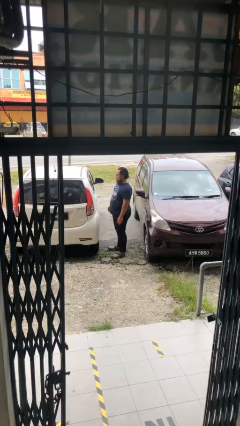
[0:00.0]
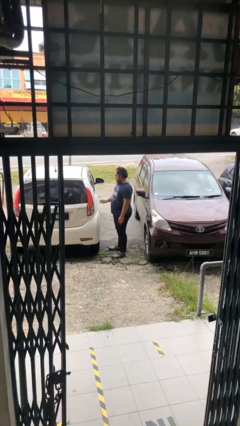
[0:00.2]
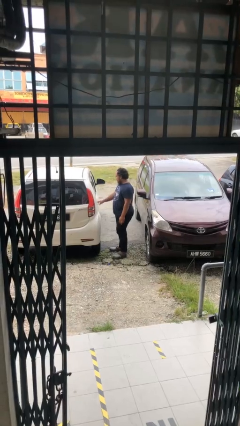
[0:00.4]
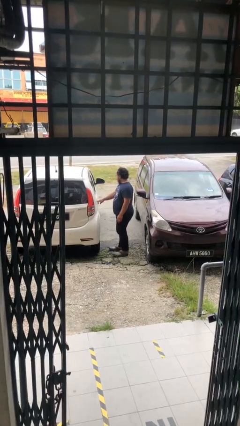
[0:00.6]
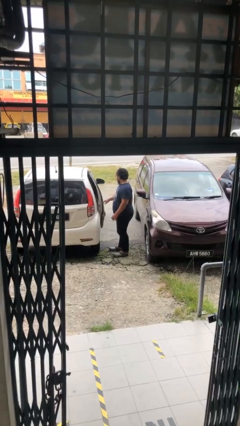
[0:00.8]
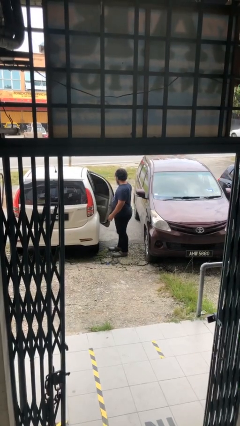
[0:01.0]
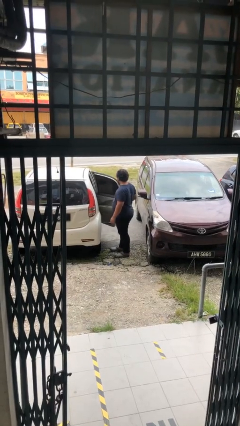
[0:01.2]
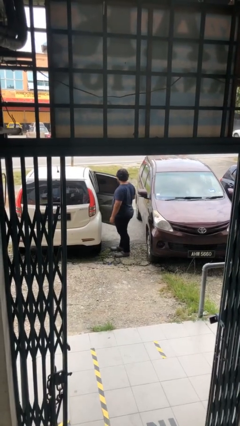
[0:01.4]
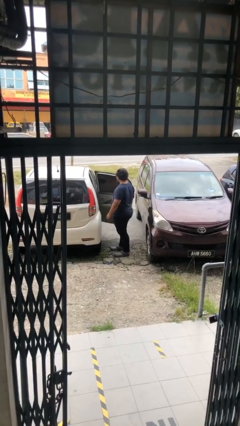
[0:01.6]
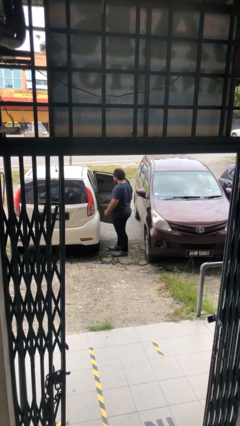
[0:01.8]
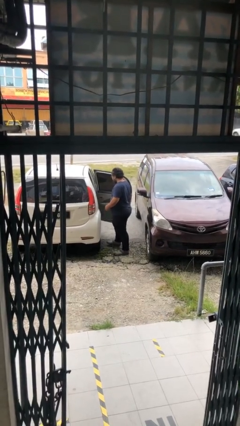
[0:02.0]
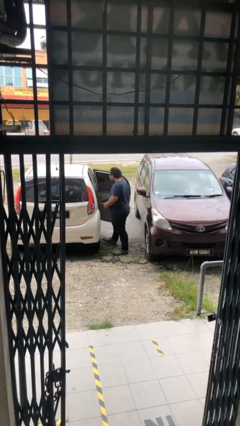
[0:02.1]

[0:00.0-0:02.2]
person opens car door

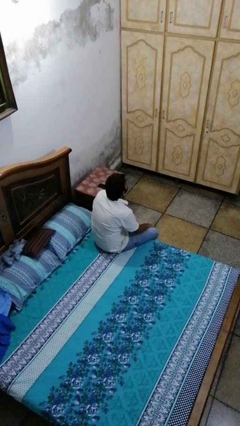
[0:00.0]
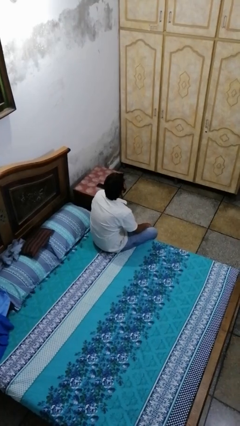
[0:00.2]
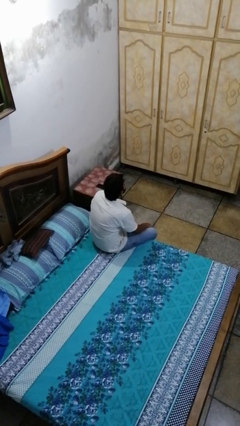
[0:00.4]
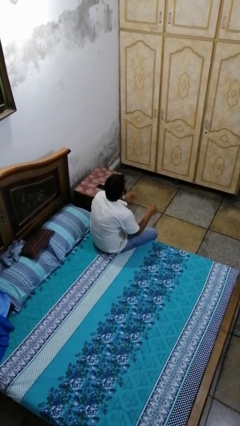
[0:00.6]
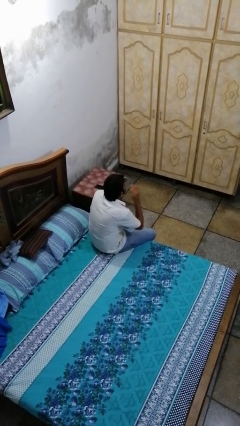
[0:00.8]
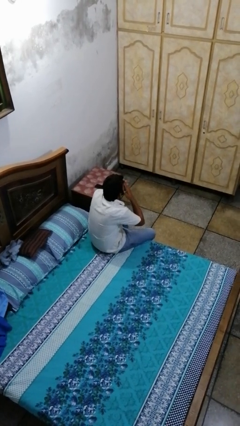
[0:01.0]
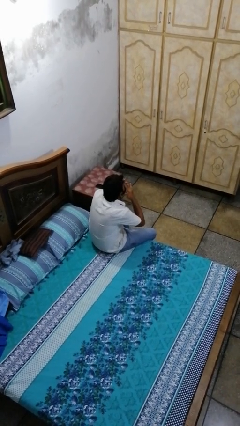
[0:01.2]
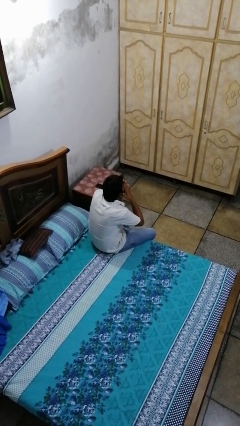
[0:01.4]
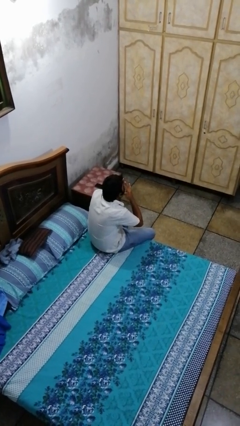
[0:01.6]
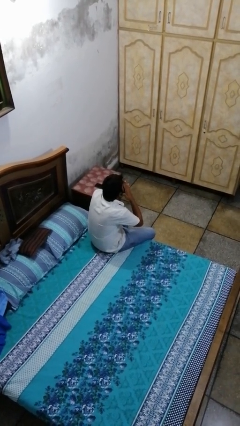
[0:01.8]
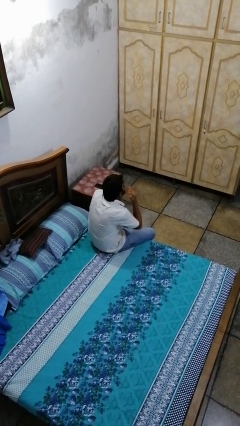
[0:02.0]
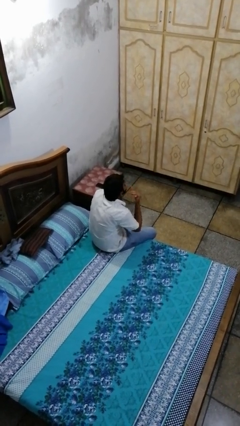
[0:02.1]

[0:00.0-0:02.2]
person rubs eyes

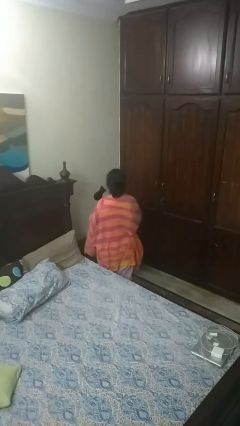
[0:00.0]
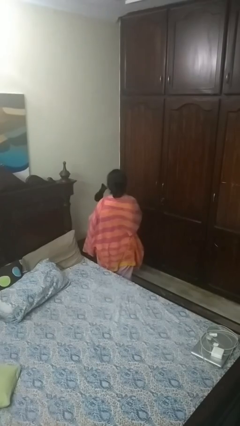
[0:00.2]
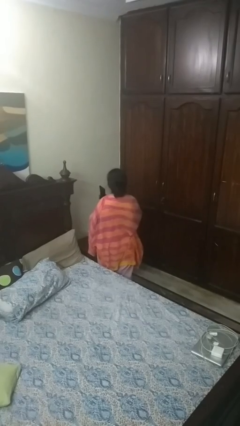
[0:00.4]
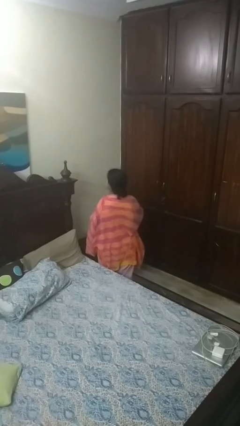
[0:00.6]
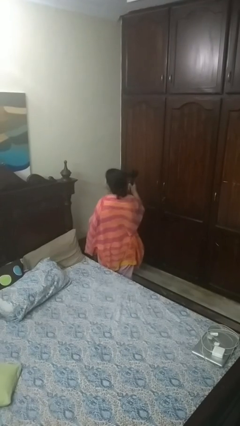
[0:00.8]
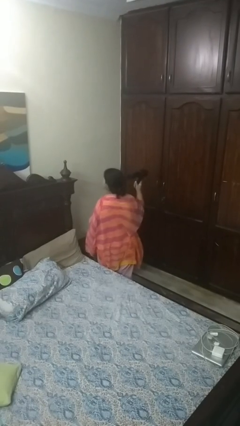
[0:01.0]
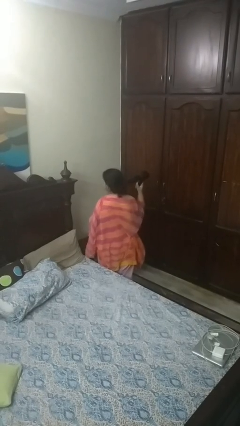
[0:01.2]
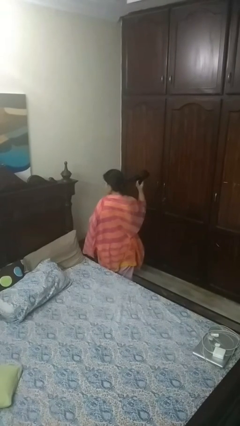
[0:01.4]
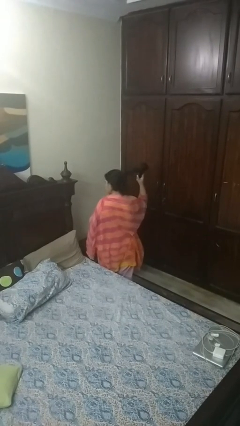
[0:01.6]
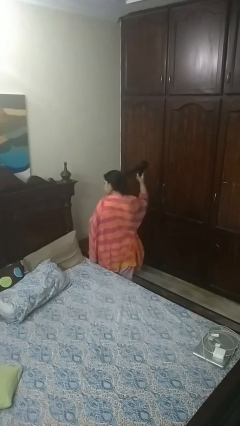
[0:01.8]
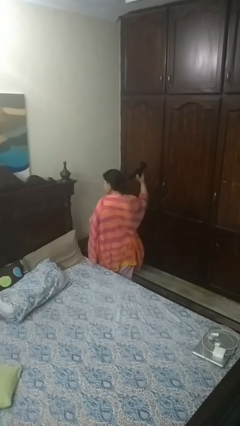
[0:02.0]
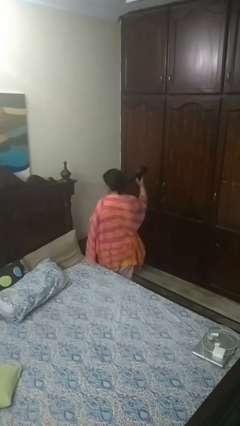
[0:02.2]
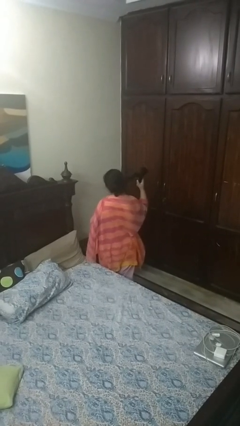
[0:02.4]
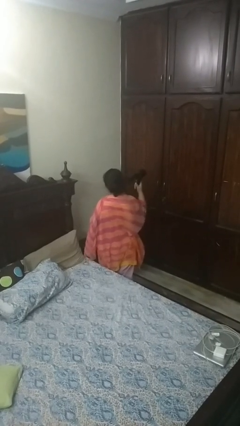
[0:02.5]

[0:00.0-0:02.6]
person dries hair with hairdryer

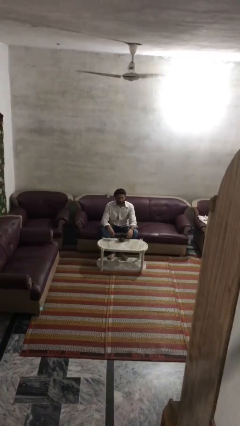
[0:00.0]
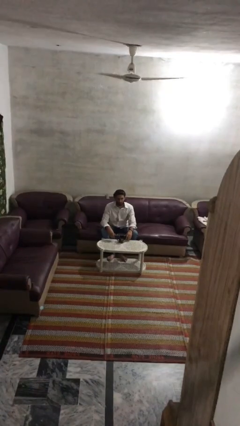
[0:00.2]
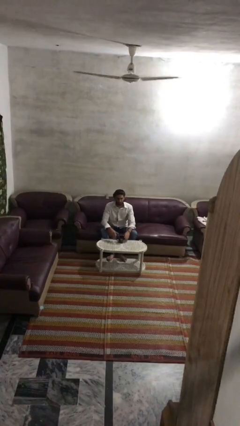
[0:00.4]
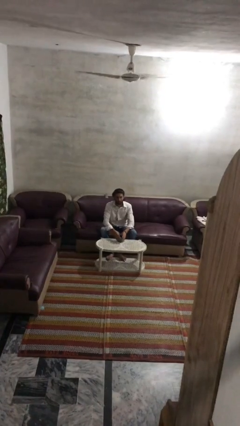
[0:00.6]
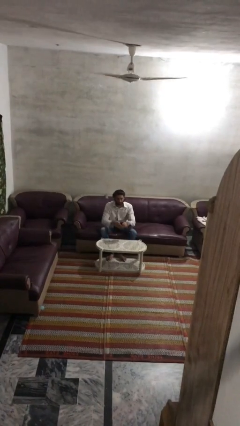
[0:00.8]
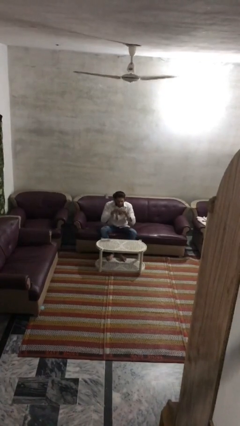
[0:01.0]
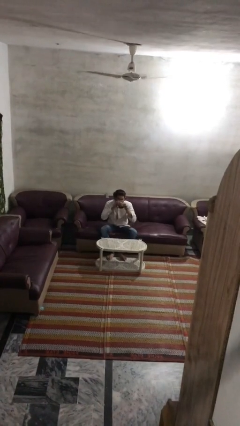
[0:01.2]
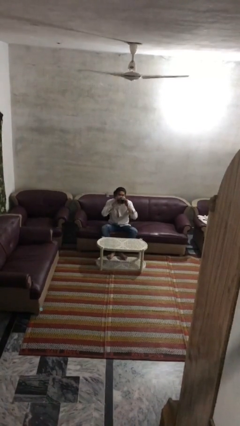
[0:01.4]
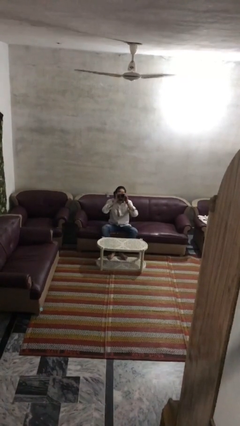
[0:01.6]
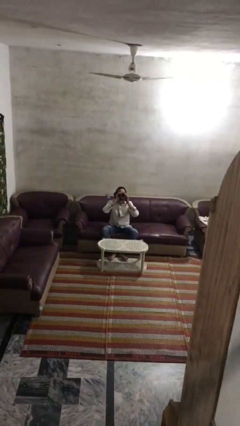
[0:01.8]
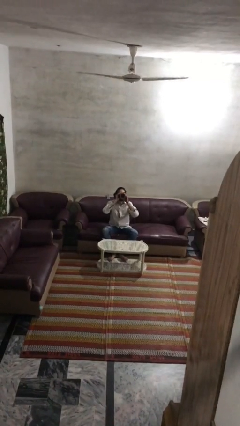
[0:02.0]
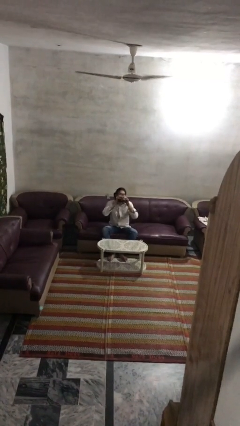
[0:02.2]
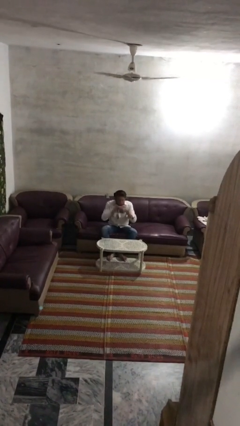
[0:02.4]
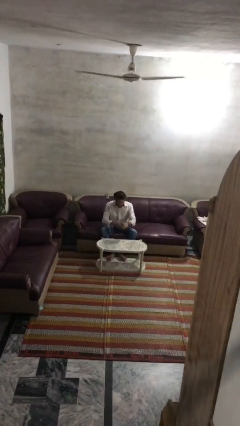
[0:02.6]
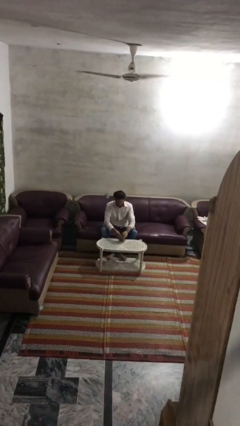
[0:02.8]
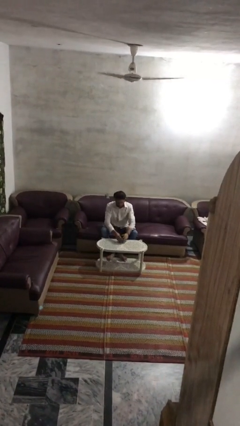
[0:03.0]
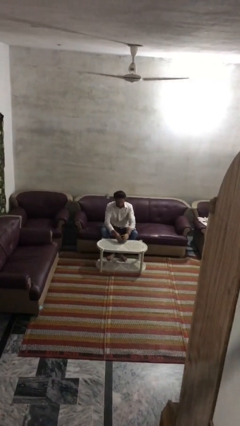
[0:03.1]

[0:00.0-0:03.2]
person drinks from mug

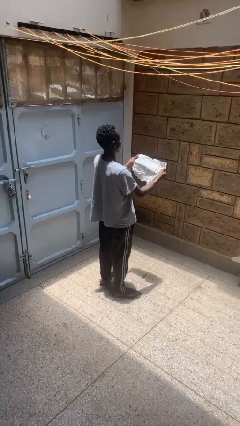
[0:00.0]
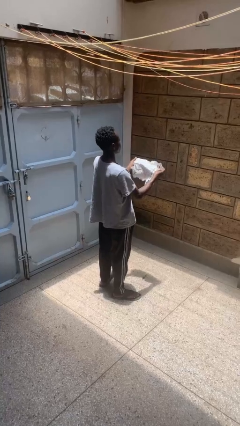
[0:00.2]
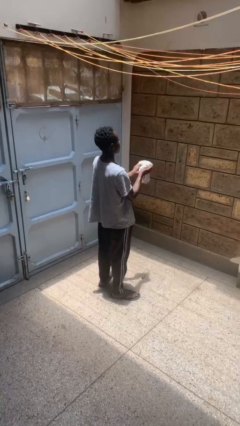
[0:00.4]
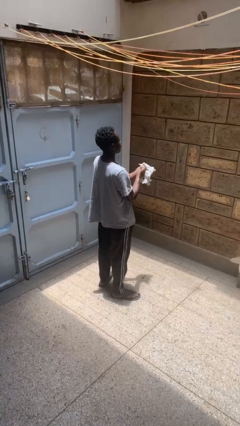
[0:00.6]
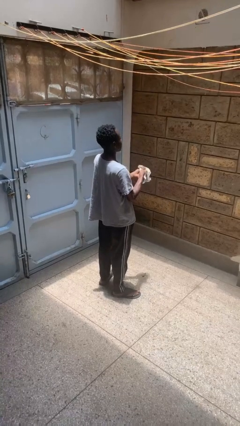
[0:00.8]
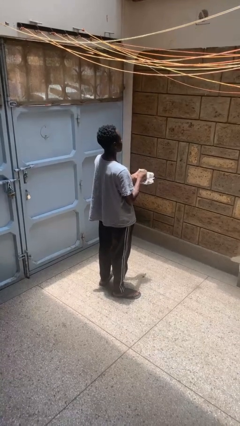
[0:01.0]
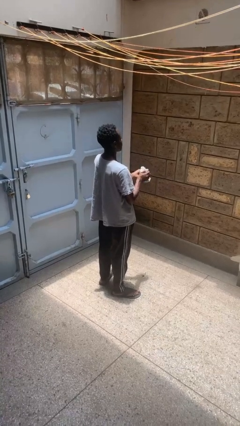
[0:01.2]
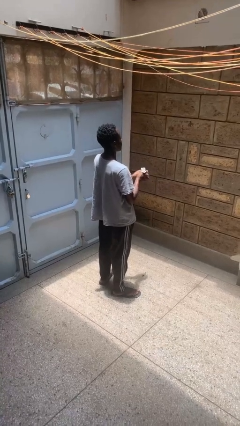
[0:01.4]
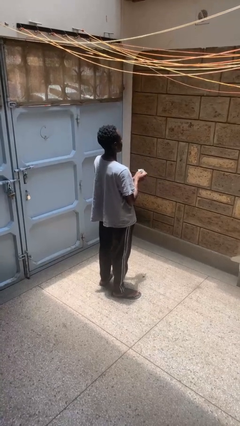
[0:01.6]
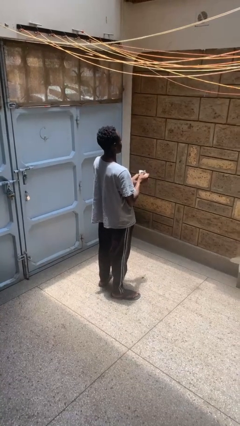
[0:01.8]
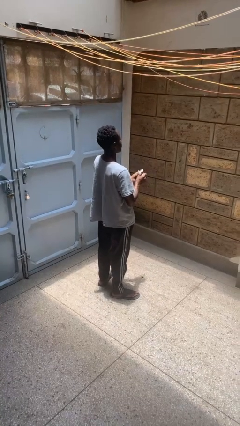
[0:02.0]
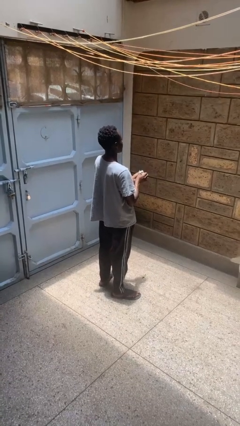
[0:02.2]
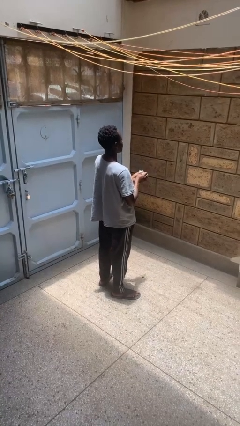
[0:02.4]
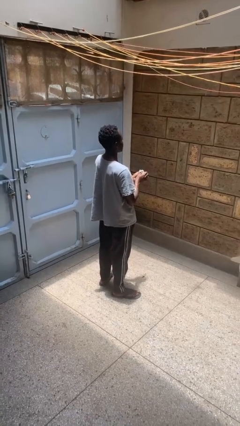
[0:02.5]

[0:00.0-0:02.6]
person crumples paper

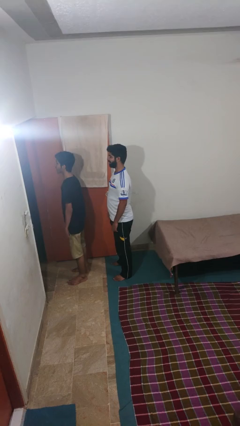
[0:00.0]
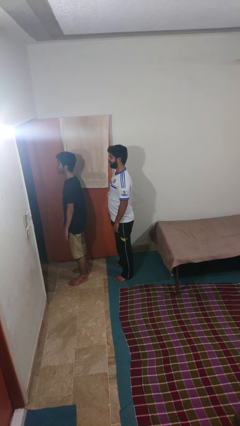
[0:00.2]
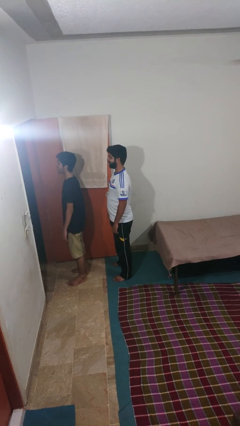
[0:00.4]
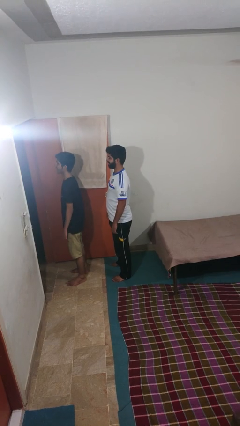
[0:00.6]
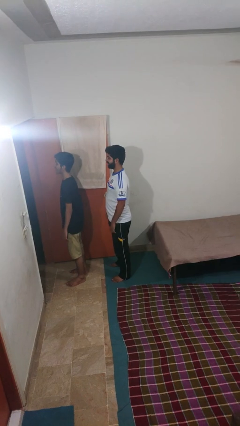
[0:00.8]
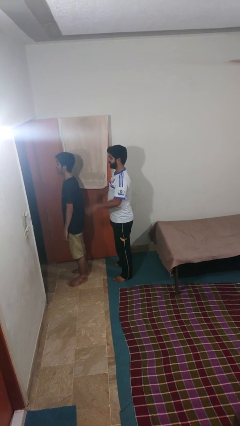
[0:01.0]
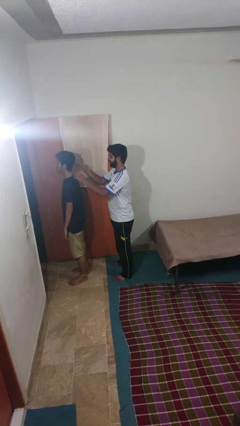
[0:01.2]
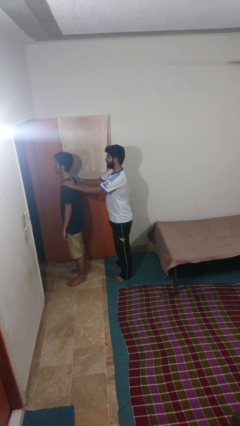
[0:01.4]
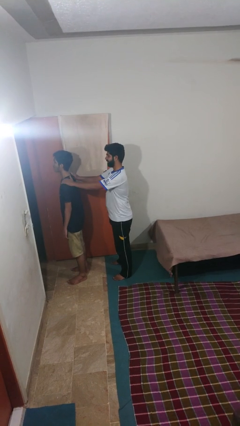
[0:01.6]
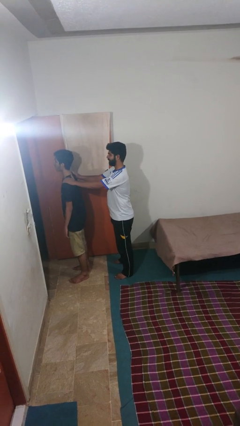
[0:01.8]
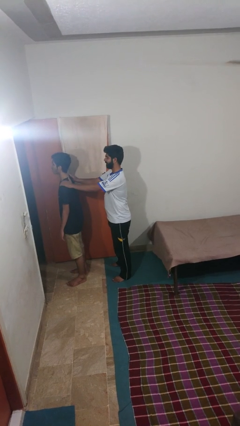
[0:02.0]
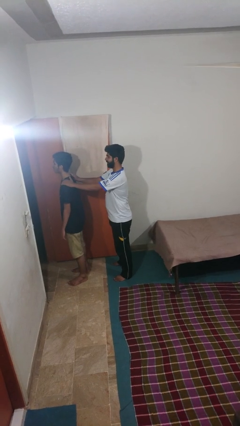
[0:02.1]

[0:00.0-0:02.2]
person grabs person by shoulder

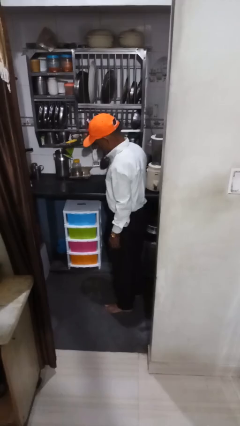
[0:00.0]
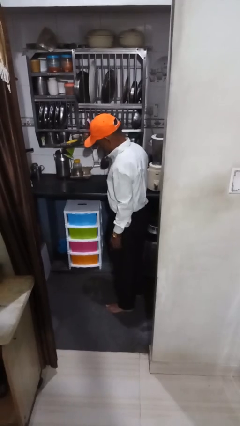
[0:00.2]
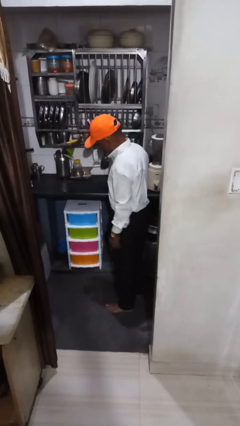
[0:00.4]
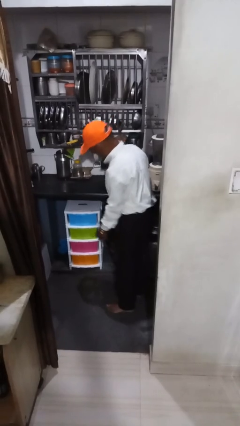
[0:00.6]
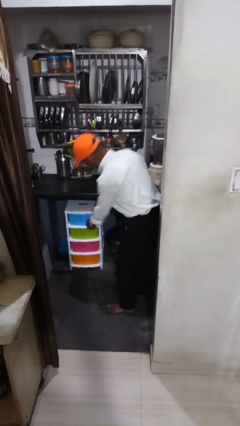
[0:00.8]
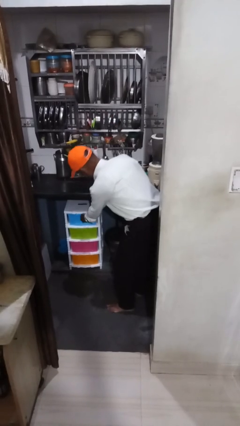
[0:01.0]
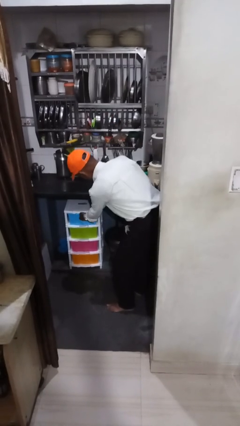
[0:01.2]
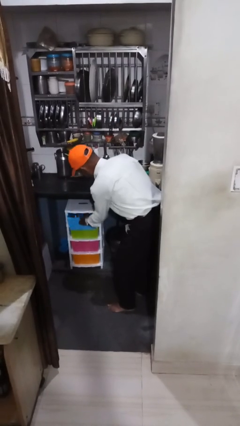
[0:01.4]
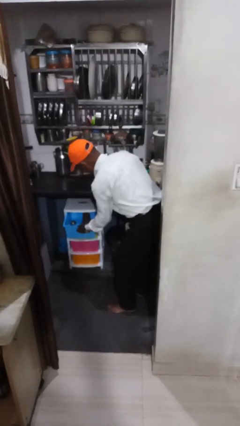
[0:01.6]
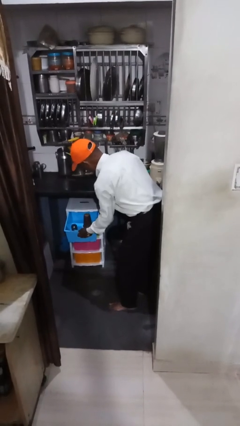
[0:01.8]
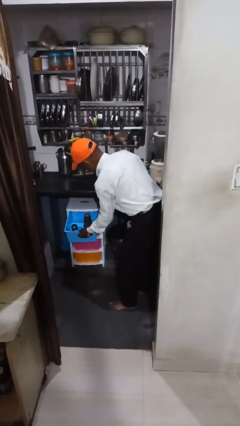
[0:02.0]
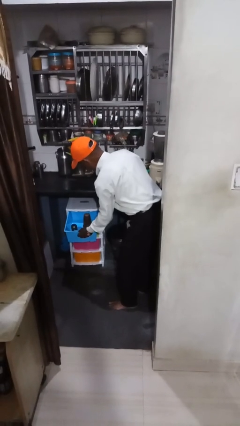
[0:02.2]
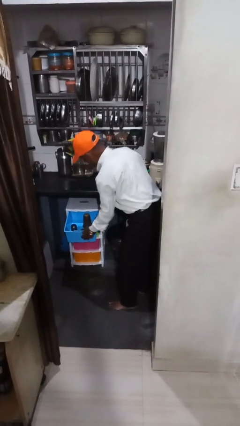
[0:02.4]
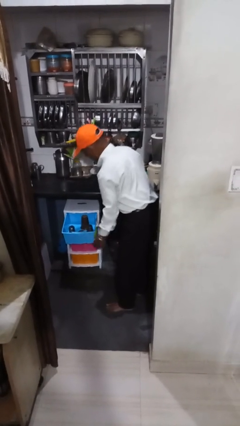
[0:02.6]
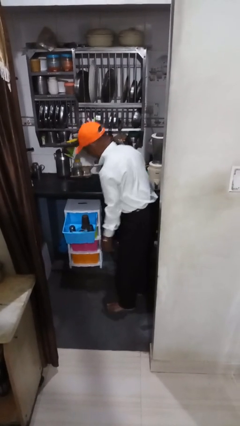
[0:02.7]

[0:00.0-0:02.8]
person opens kitchen drawer
